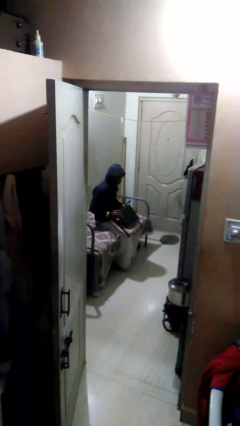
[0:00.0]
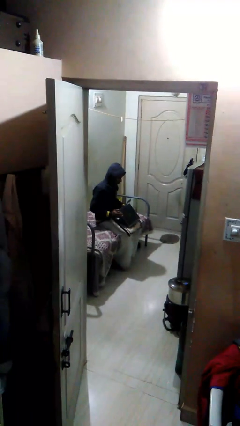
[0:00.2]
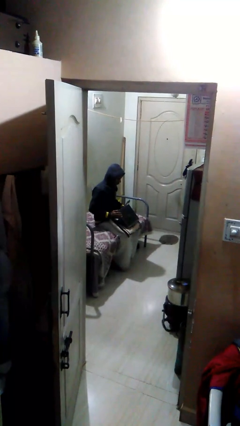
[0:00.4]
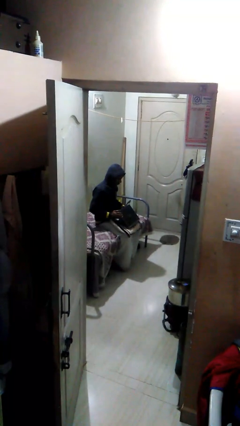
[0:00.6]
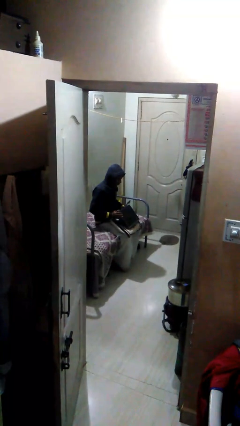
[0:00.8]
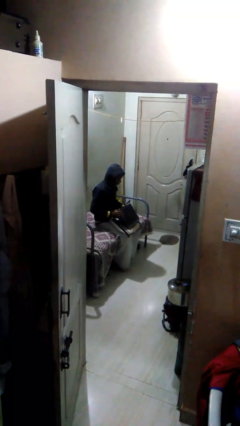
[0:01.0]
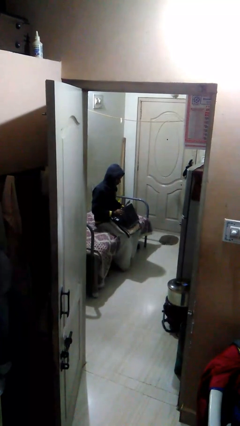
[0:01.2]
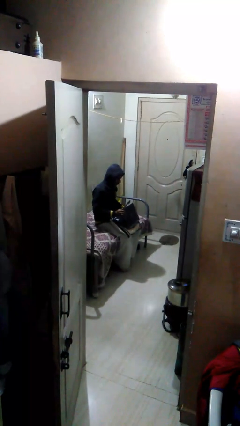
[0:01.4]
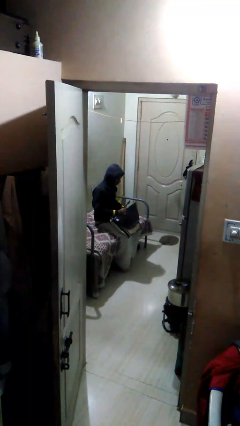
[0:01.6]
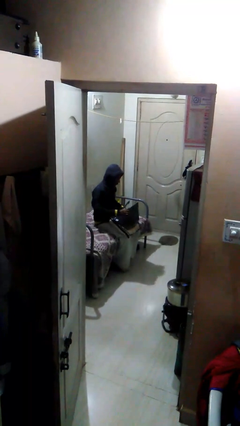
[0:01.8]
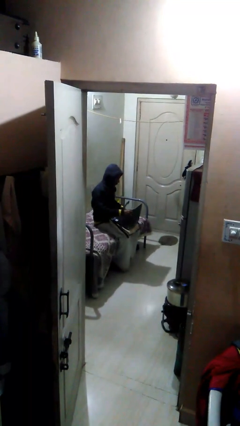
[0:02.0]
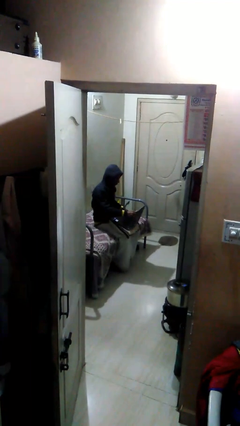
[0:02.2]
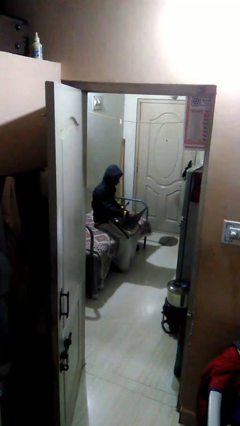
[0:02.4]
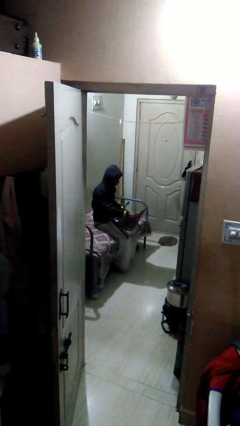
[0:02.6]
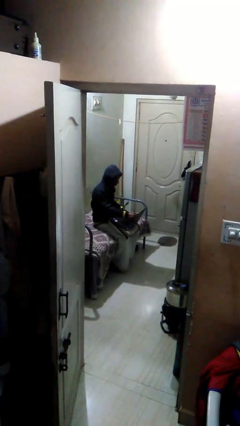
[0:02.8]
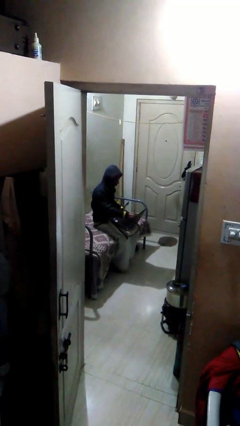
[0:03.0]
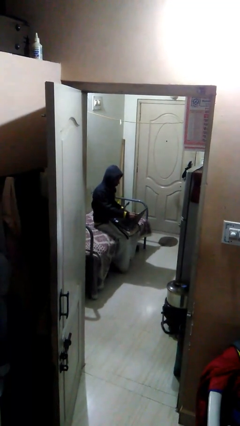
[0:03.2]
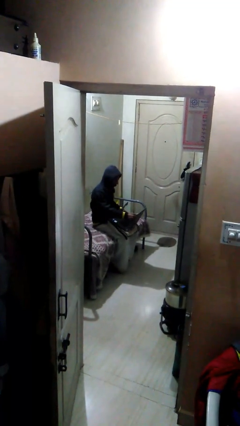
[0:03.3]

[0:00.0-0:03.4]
person interacts with laptop

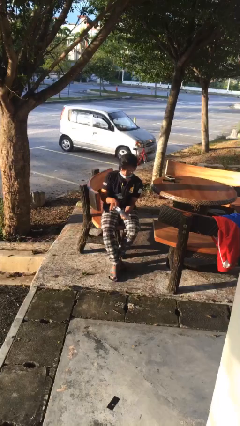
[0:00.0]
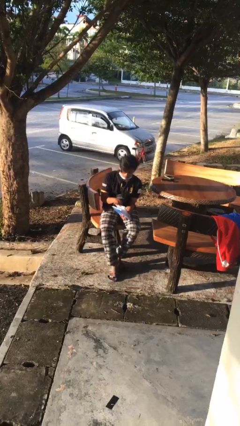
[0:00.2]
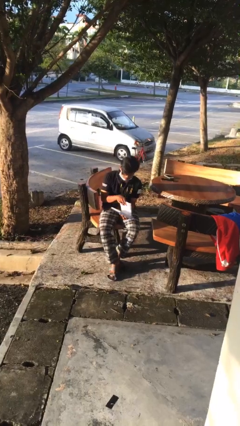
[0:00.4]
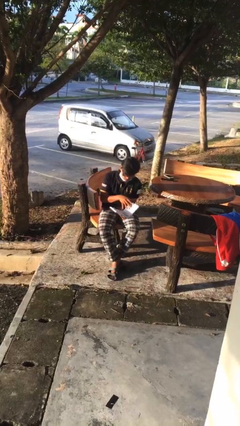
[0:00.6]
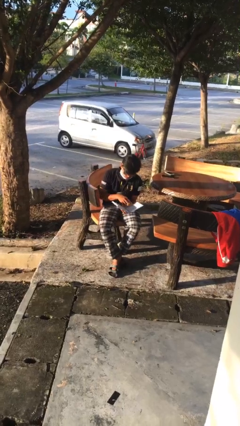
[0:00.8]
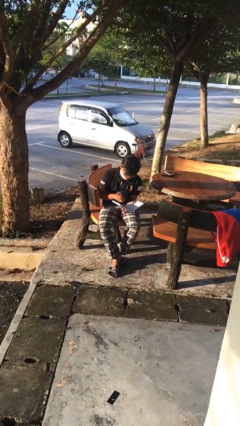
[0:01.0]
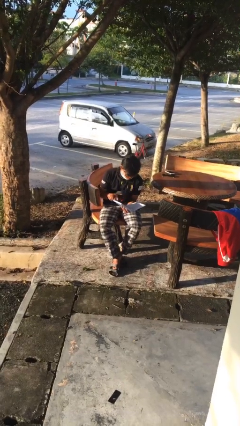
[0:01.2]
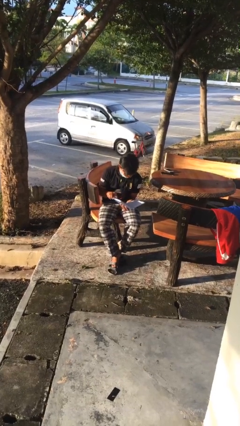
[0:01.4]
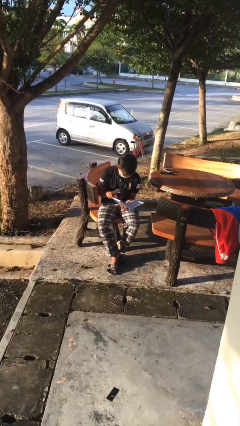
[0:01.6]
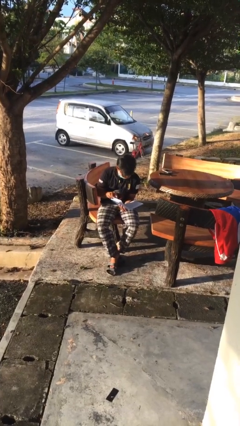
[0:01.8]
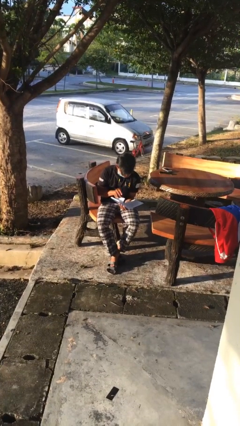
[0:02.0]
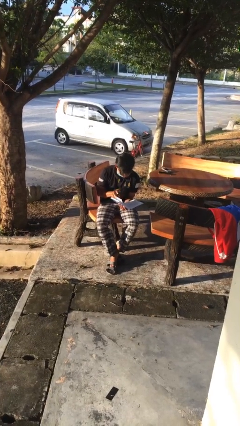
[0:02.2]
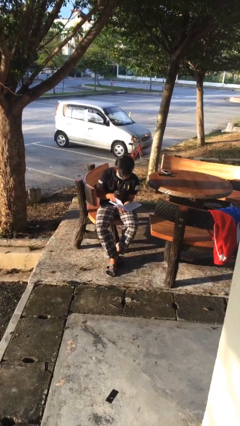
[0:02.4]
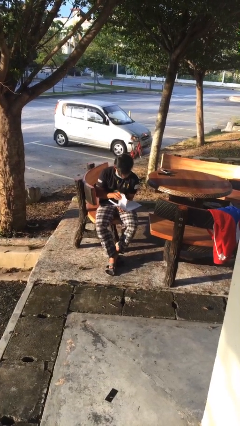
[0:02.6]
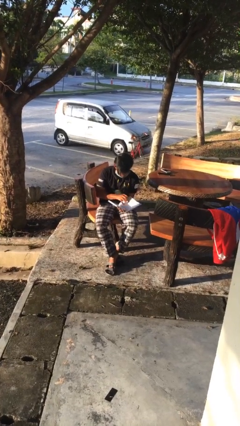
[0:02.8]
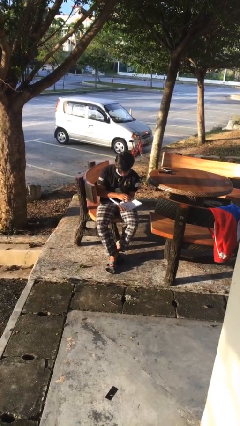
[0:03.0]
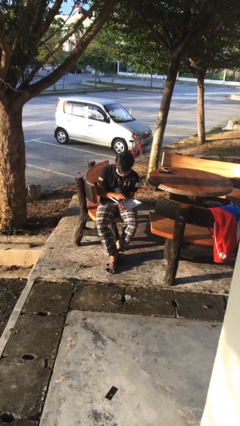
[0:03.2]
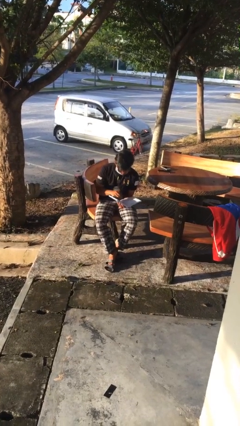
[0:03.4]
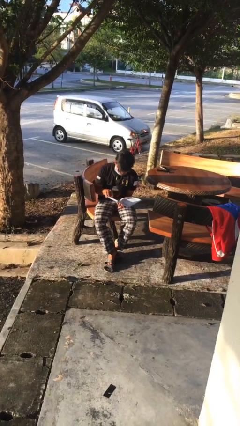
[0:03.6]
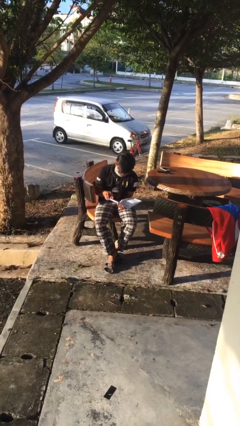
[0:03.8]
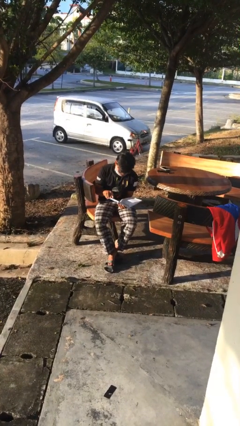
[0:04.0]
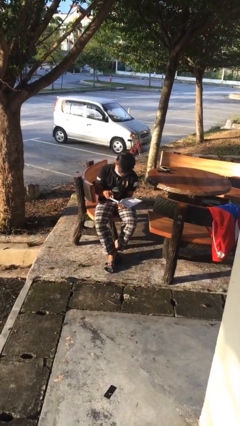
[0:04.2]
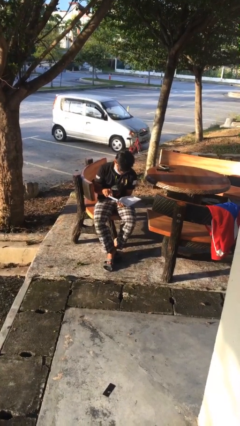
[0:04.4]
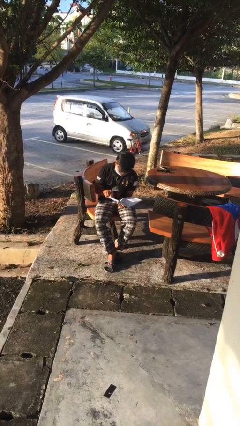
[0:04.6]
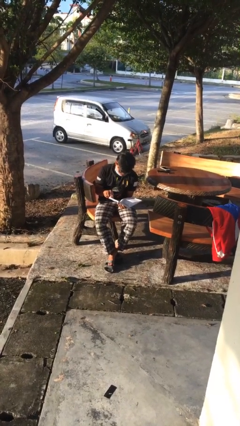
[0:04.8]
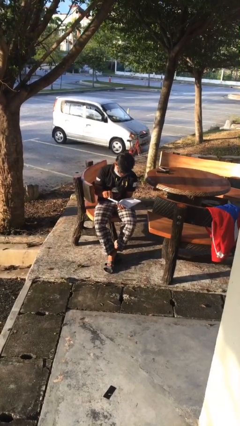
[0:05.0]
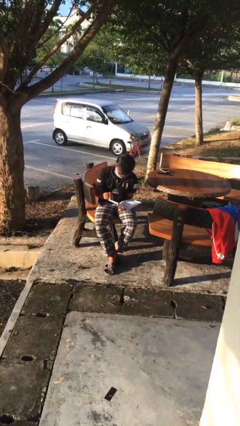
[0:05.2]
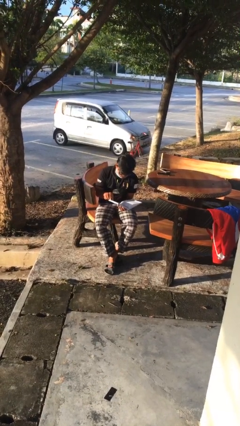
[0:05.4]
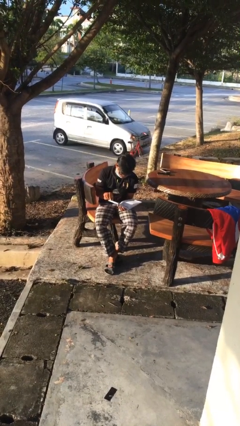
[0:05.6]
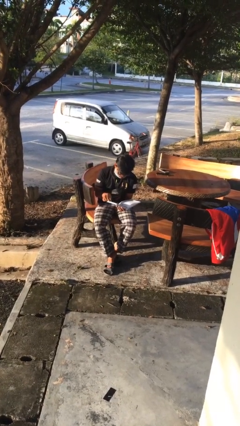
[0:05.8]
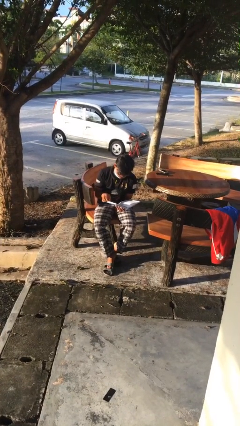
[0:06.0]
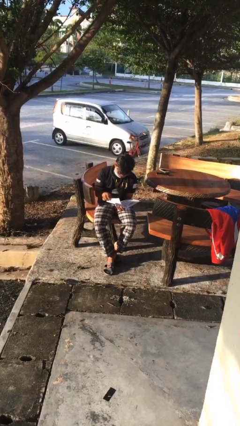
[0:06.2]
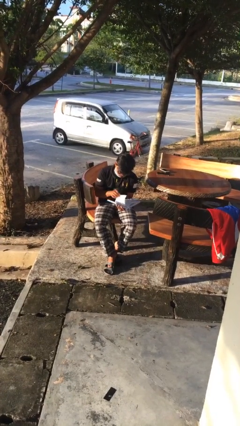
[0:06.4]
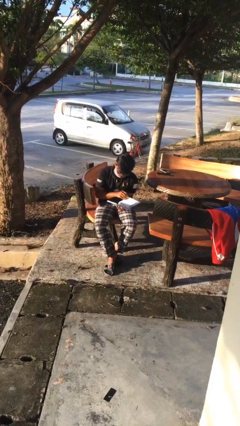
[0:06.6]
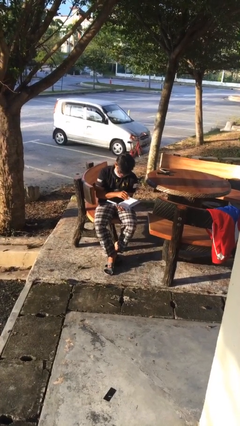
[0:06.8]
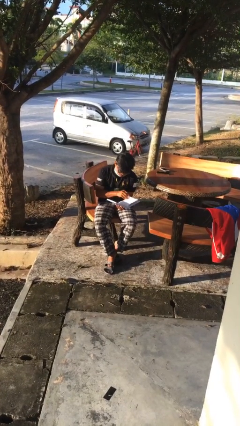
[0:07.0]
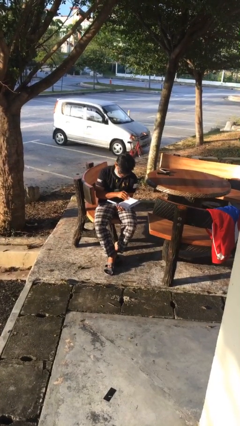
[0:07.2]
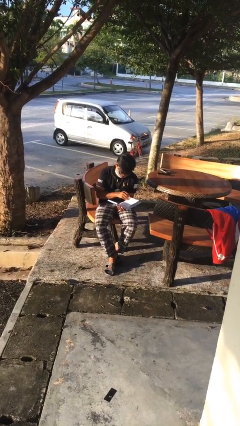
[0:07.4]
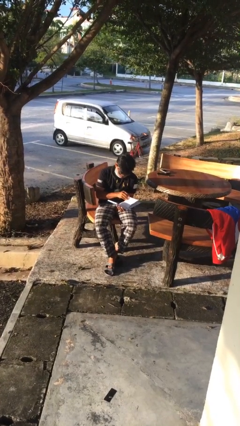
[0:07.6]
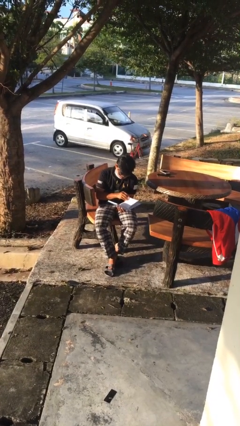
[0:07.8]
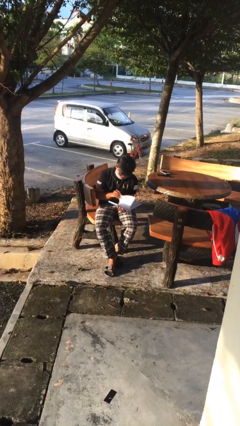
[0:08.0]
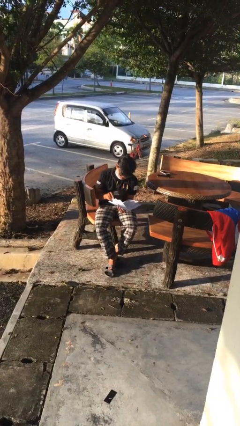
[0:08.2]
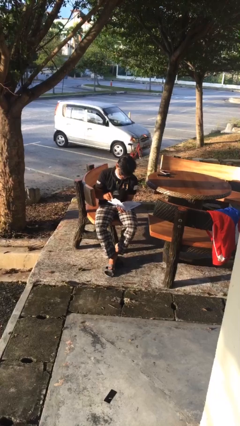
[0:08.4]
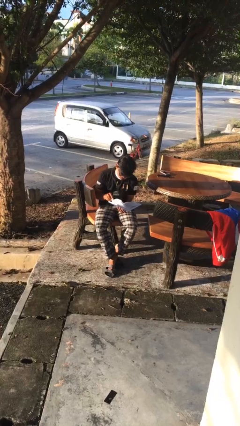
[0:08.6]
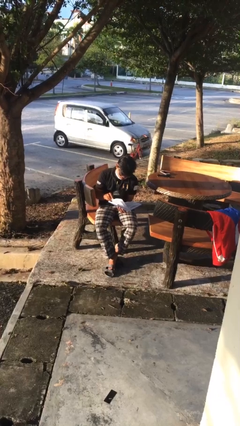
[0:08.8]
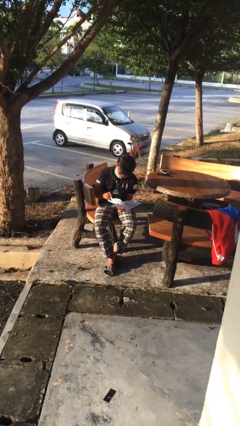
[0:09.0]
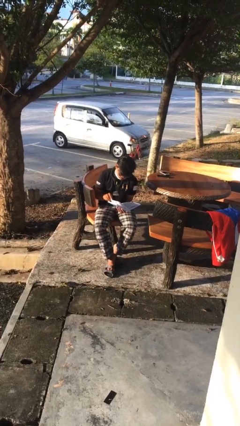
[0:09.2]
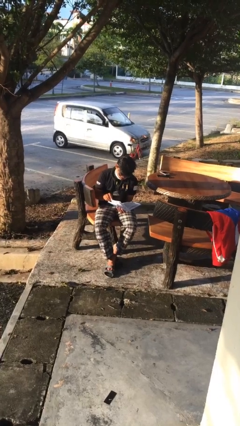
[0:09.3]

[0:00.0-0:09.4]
person reads document

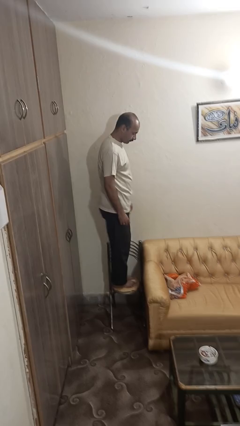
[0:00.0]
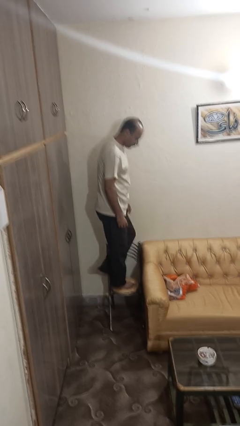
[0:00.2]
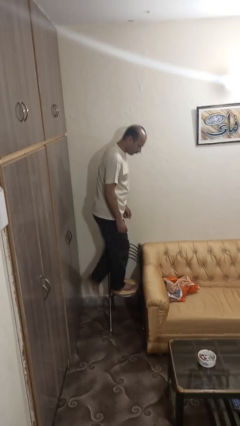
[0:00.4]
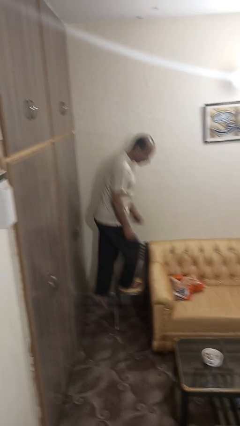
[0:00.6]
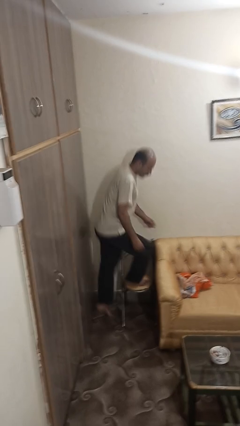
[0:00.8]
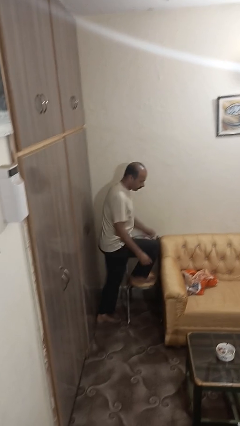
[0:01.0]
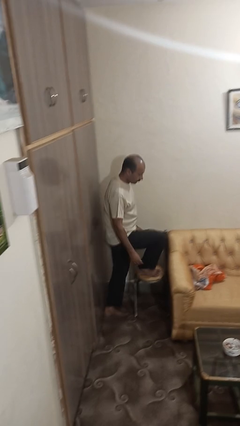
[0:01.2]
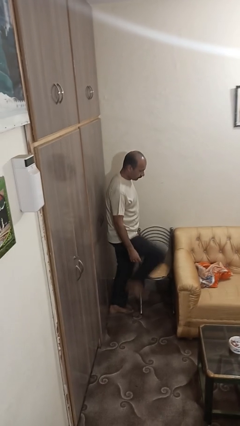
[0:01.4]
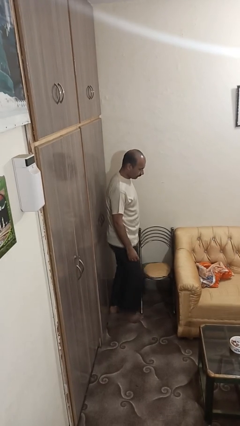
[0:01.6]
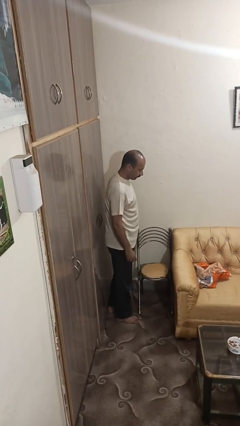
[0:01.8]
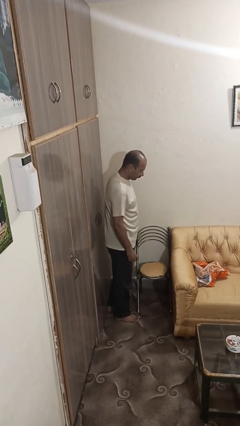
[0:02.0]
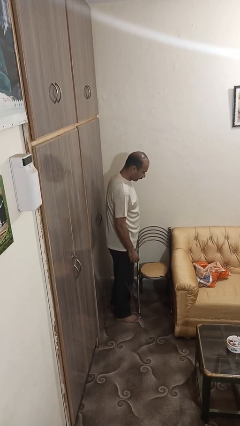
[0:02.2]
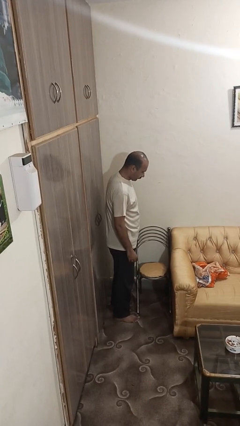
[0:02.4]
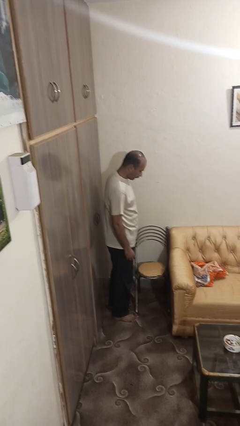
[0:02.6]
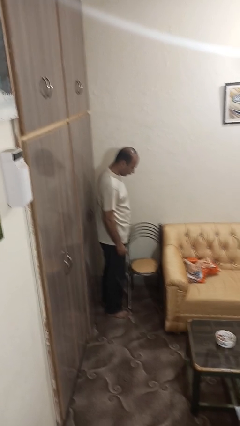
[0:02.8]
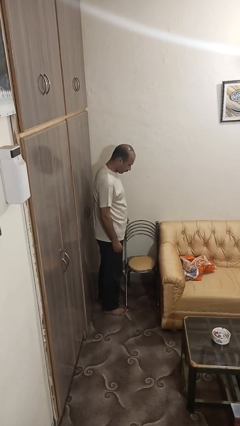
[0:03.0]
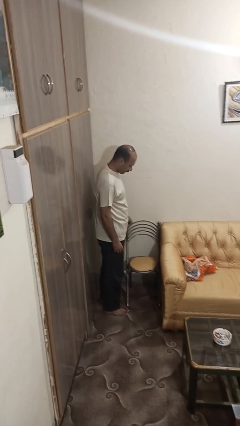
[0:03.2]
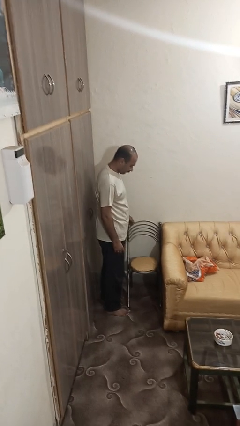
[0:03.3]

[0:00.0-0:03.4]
person climbs off chair

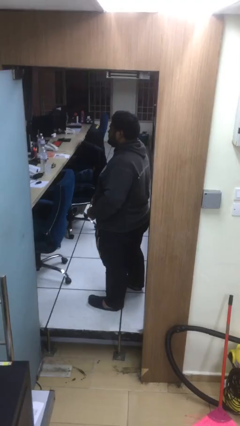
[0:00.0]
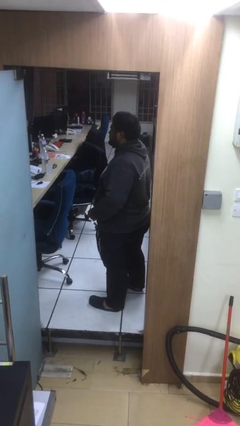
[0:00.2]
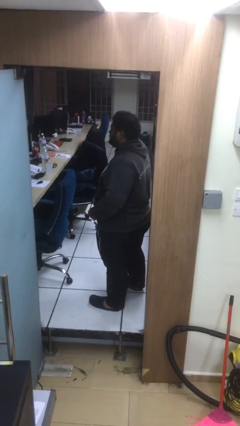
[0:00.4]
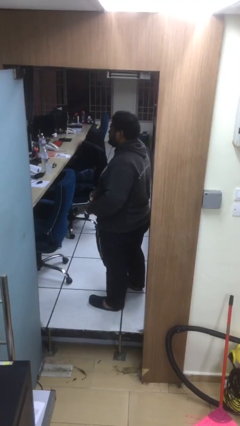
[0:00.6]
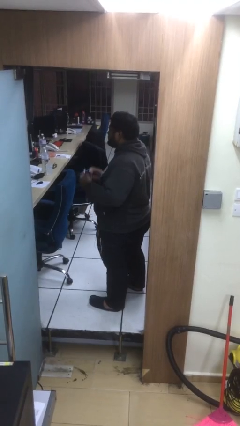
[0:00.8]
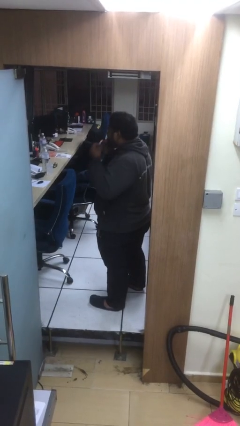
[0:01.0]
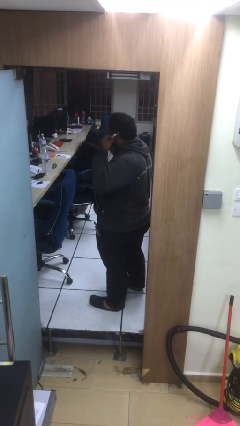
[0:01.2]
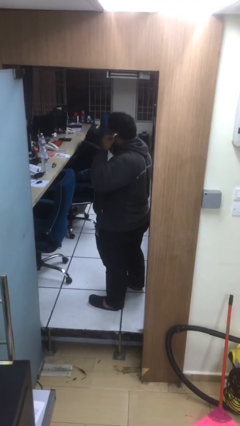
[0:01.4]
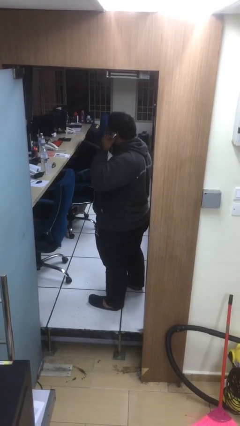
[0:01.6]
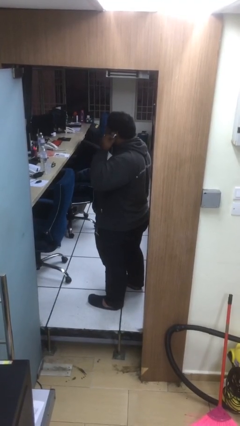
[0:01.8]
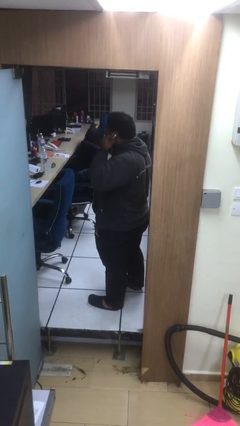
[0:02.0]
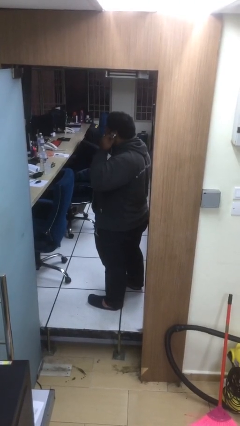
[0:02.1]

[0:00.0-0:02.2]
person puts on headphones
